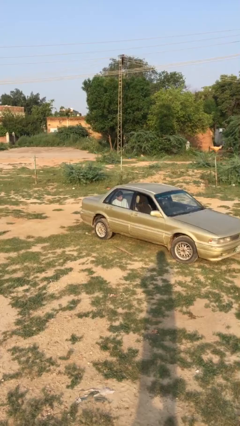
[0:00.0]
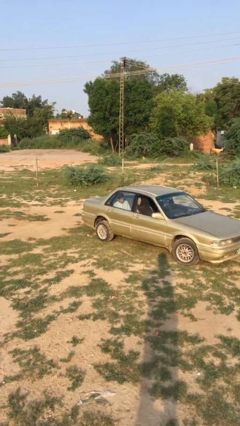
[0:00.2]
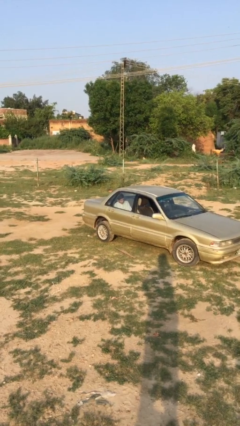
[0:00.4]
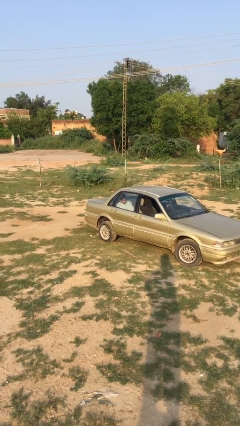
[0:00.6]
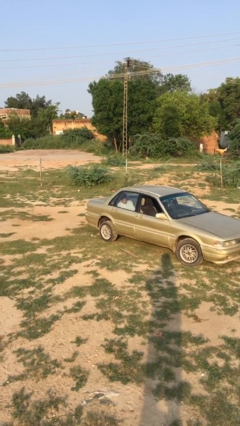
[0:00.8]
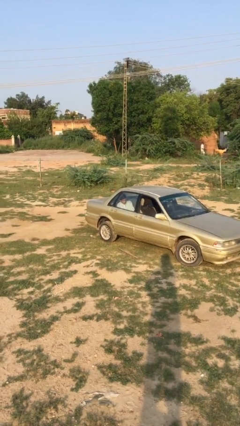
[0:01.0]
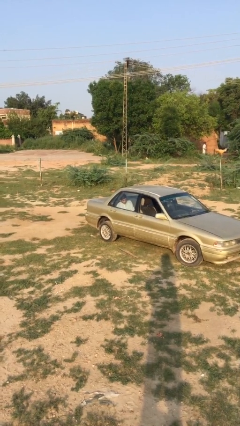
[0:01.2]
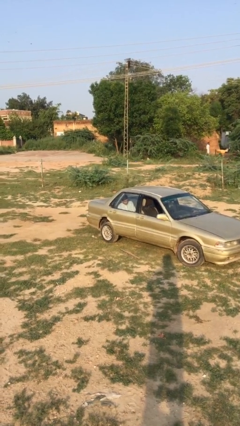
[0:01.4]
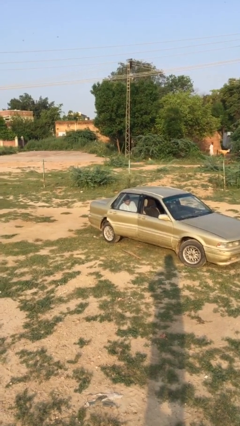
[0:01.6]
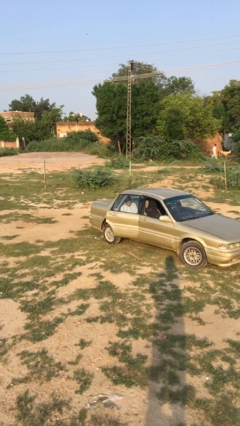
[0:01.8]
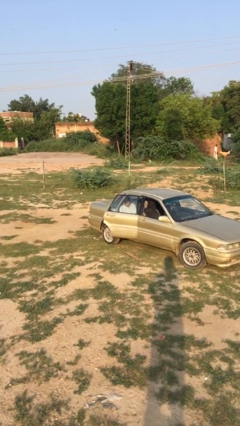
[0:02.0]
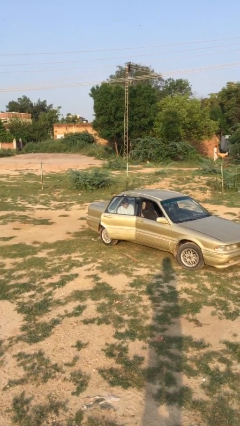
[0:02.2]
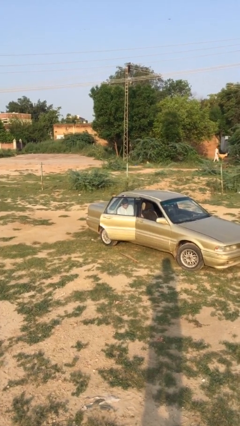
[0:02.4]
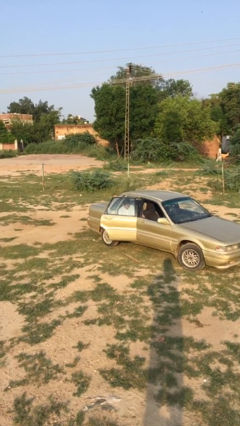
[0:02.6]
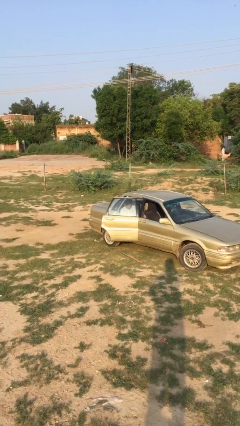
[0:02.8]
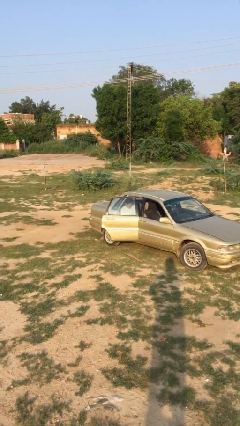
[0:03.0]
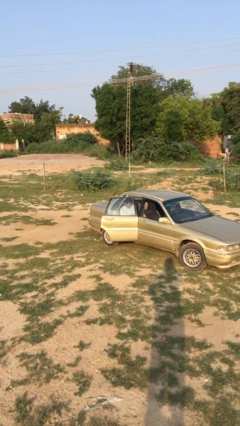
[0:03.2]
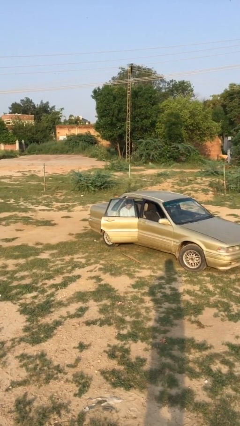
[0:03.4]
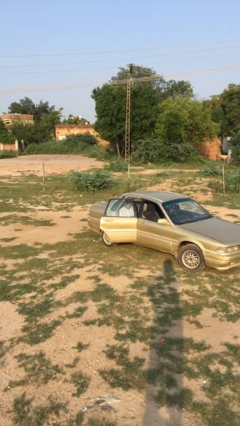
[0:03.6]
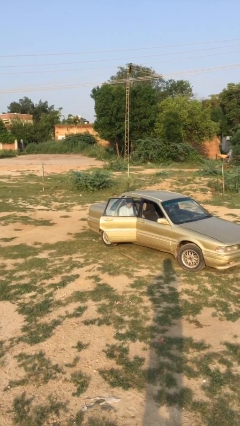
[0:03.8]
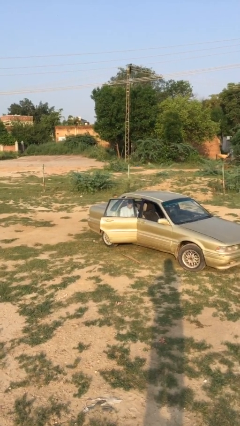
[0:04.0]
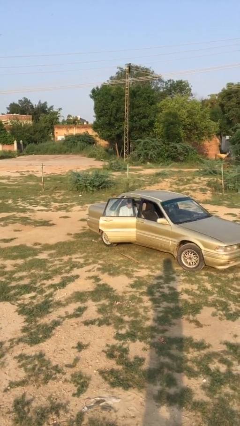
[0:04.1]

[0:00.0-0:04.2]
person opens car door

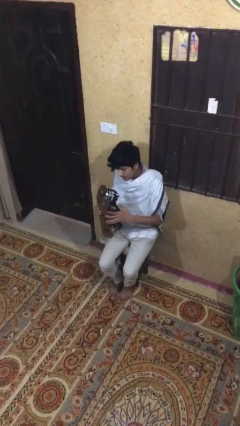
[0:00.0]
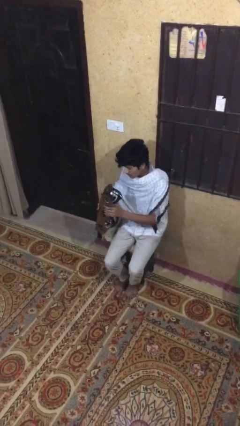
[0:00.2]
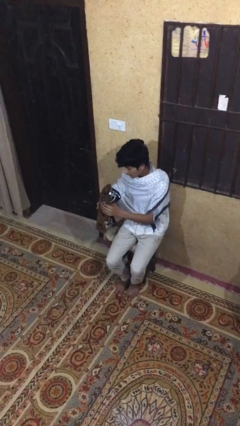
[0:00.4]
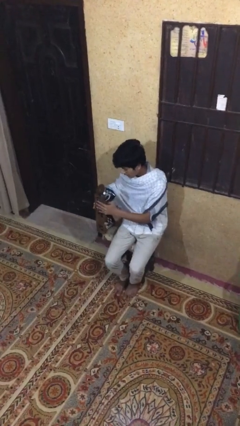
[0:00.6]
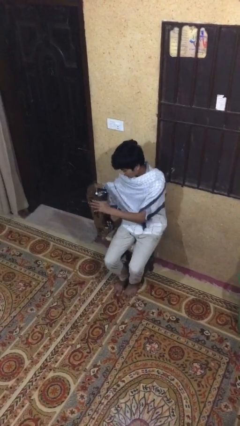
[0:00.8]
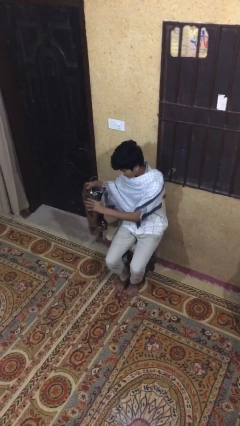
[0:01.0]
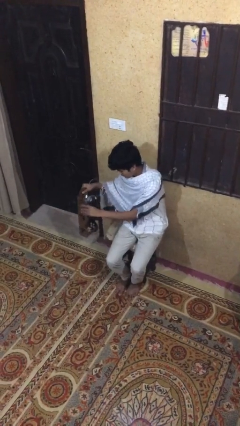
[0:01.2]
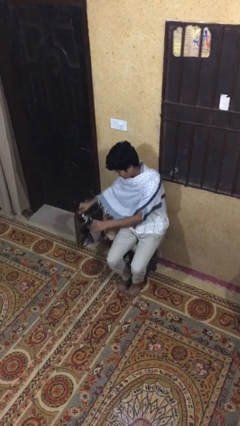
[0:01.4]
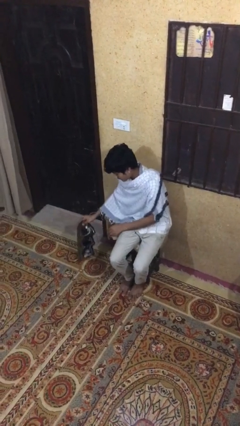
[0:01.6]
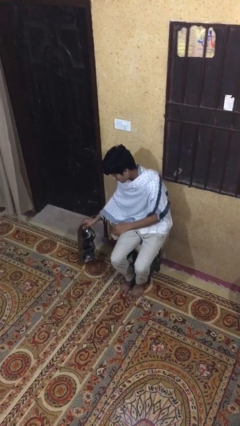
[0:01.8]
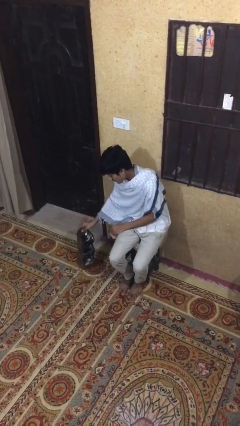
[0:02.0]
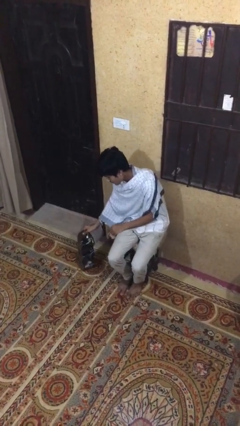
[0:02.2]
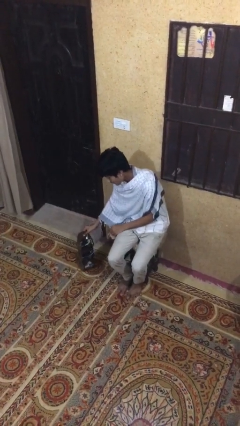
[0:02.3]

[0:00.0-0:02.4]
person puts down object on floor

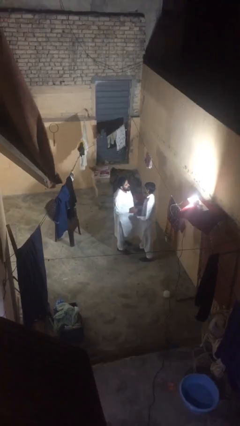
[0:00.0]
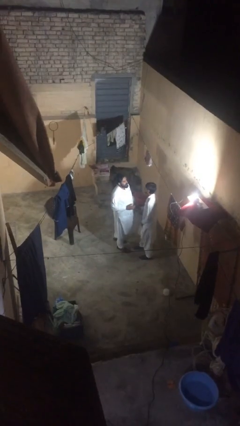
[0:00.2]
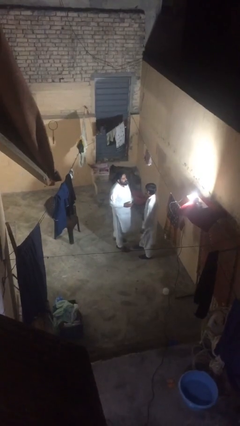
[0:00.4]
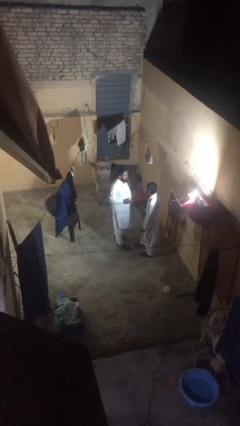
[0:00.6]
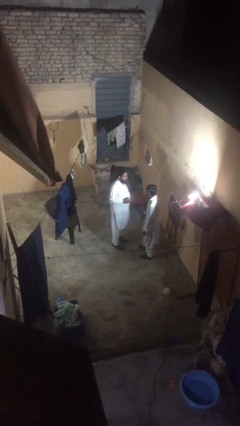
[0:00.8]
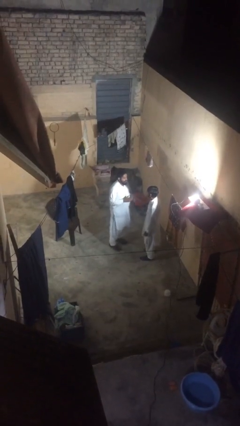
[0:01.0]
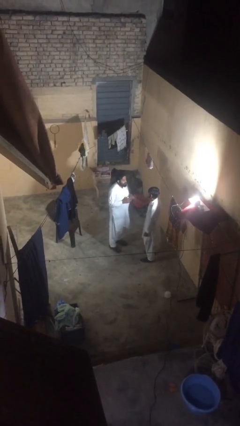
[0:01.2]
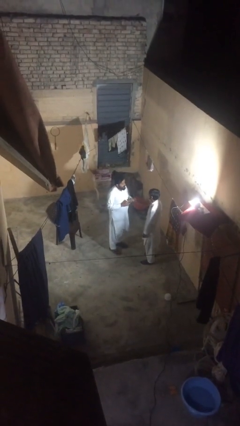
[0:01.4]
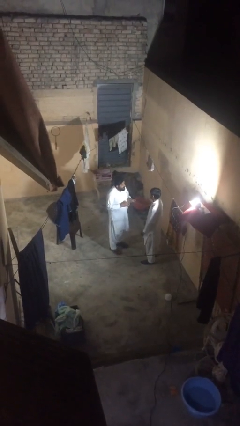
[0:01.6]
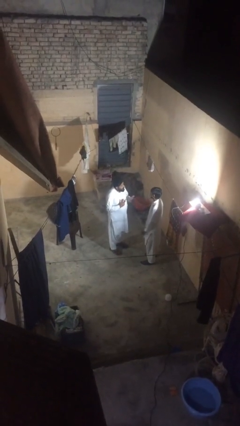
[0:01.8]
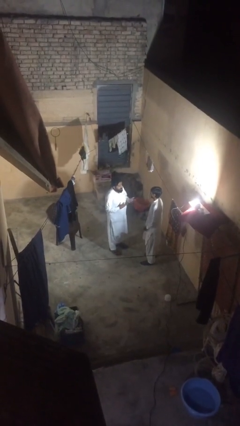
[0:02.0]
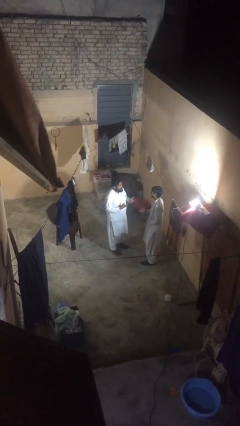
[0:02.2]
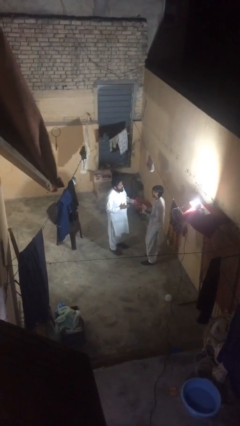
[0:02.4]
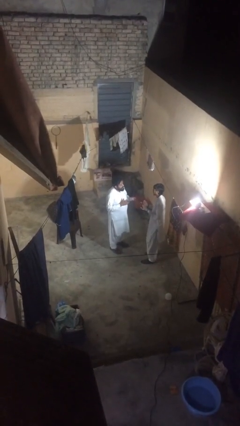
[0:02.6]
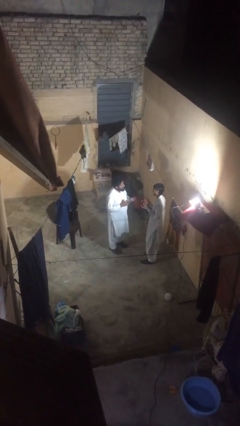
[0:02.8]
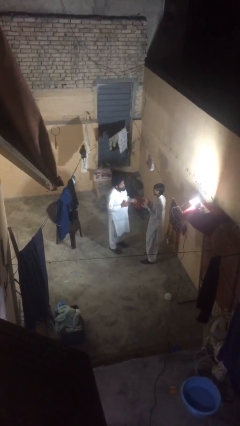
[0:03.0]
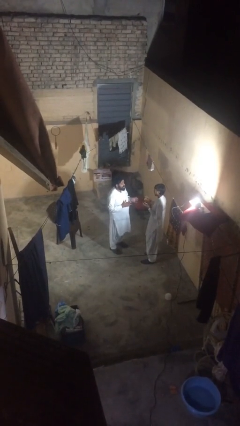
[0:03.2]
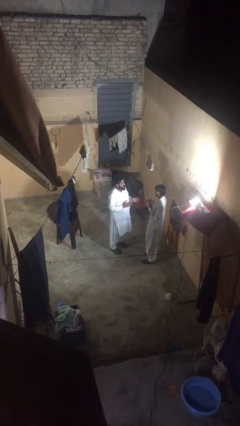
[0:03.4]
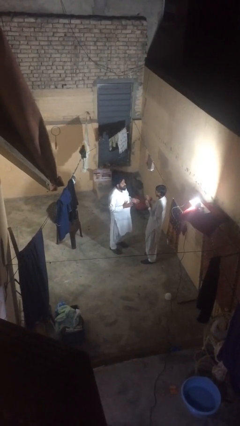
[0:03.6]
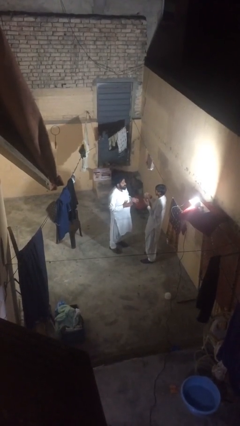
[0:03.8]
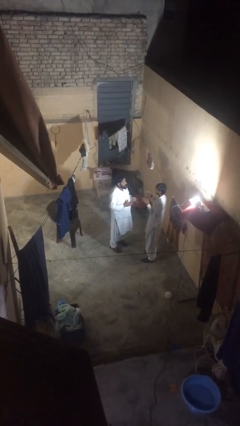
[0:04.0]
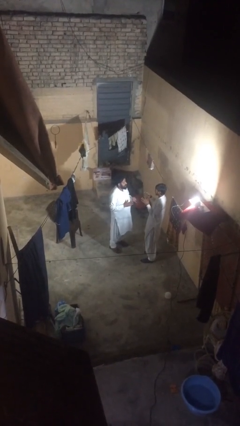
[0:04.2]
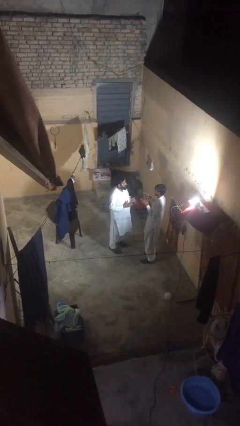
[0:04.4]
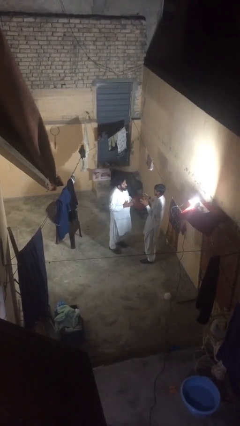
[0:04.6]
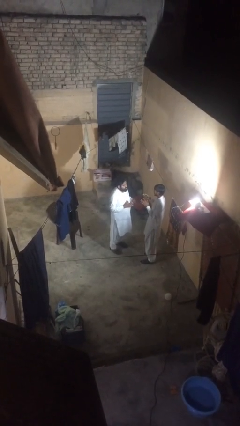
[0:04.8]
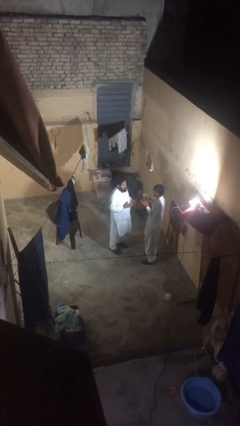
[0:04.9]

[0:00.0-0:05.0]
person talks to person

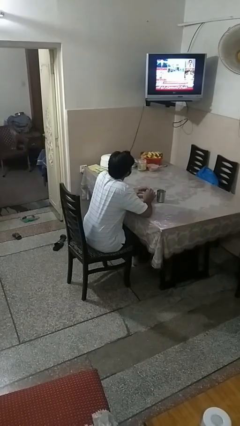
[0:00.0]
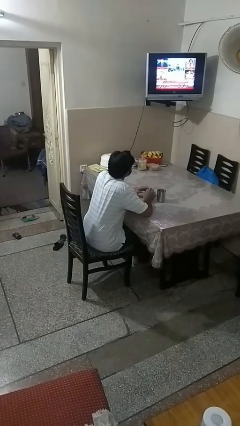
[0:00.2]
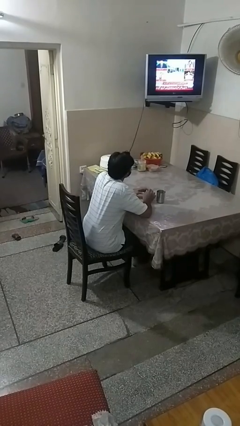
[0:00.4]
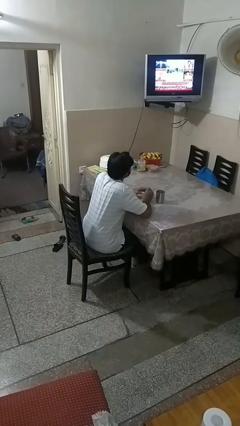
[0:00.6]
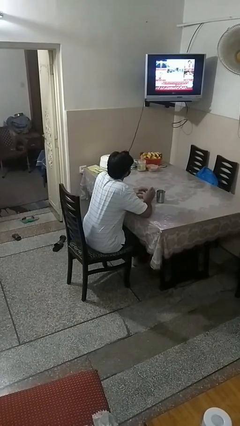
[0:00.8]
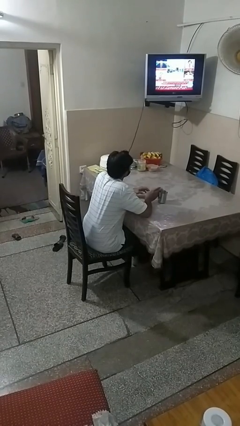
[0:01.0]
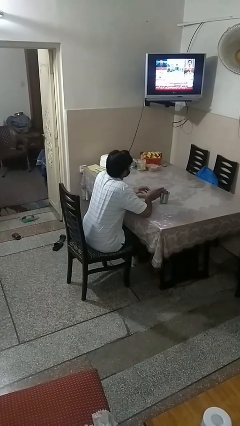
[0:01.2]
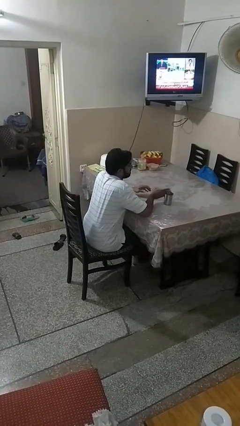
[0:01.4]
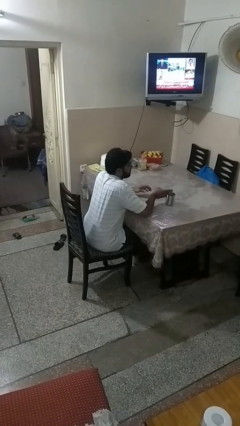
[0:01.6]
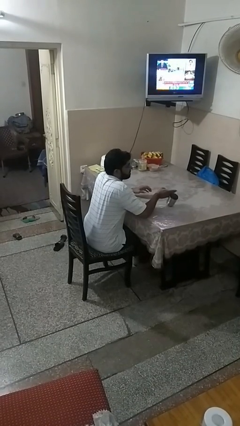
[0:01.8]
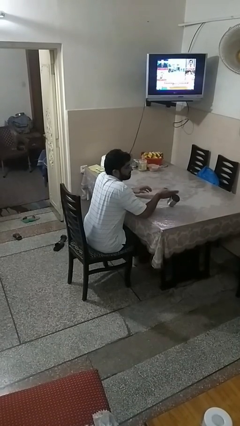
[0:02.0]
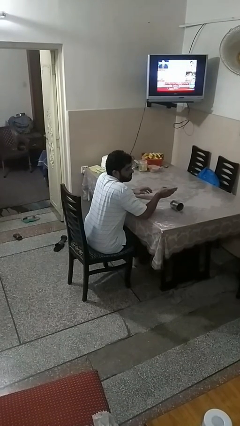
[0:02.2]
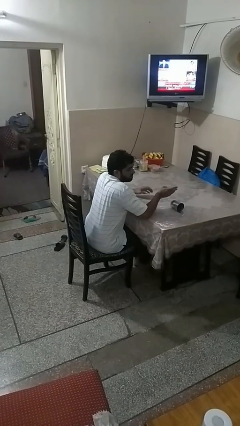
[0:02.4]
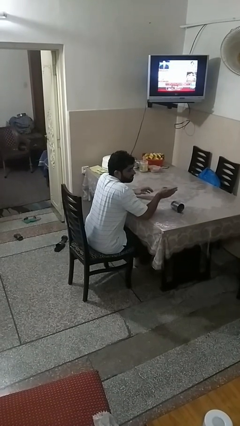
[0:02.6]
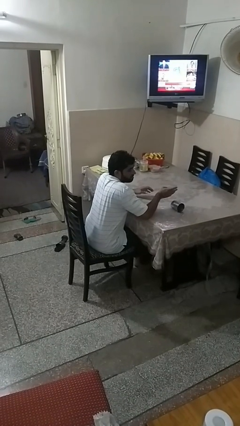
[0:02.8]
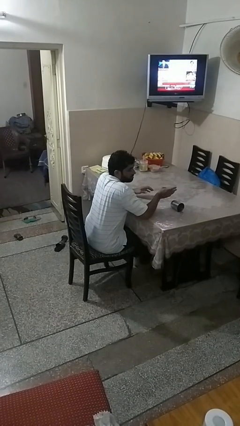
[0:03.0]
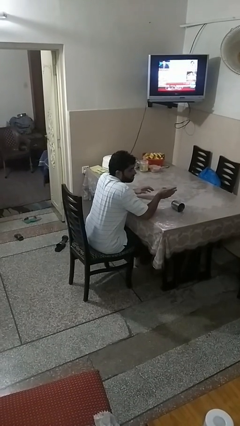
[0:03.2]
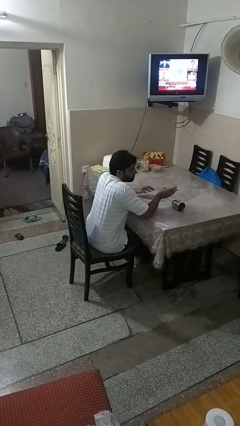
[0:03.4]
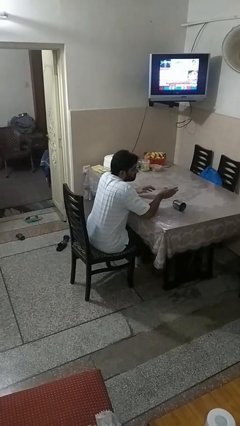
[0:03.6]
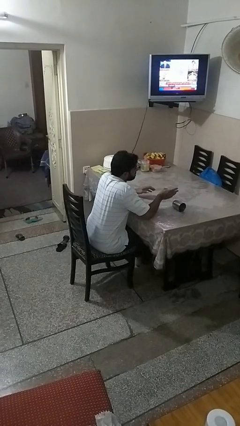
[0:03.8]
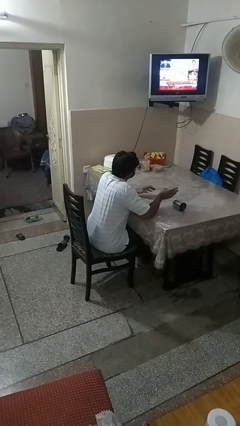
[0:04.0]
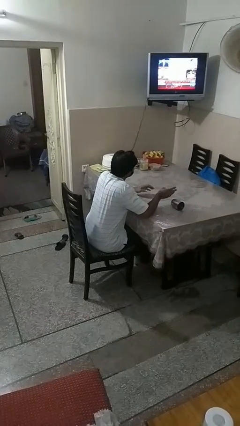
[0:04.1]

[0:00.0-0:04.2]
person spills on table

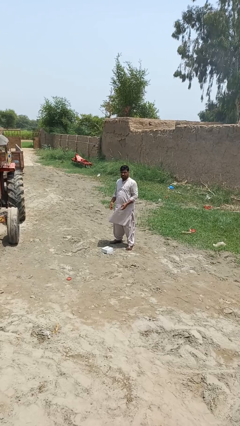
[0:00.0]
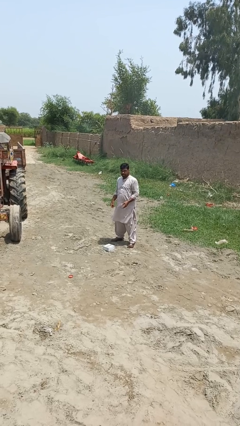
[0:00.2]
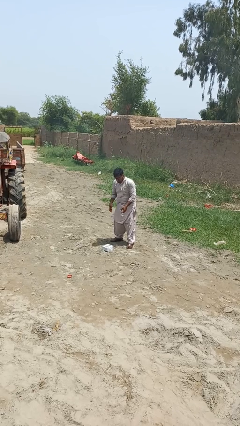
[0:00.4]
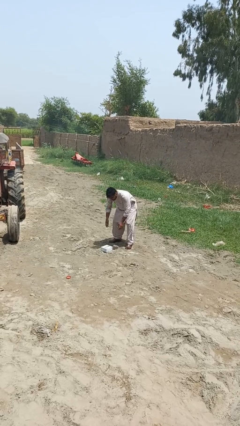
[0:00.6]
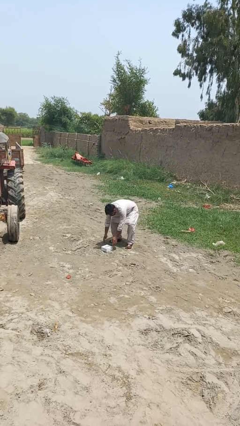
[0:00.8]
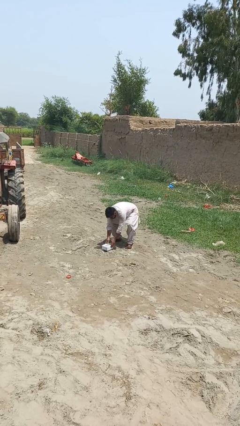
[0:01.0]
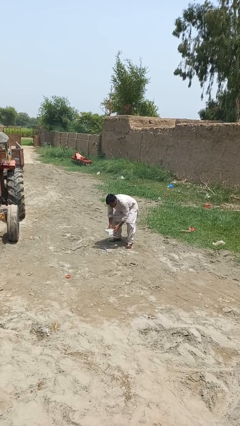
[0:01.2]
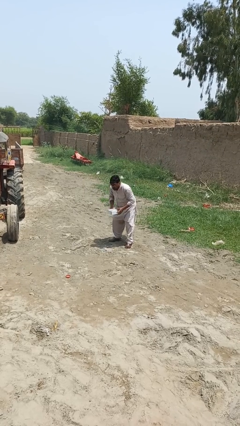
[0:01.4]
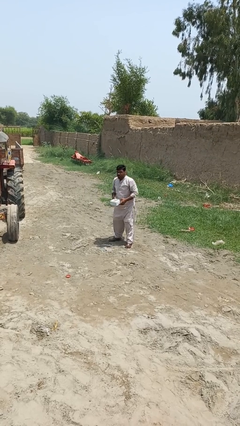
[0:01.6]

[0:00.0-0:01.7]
person picks up object from floor
